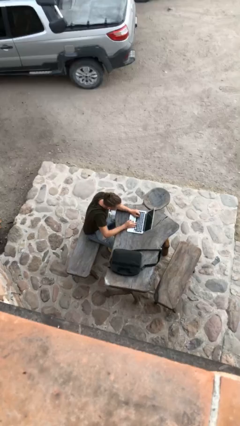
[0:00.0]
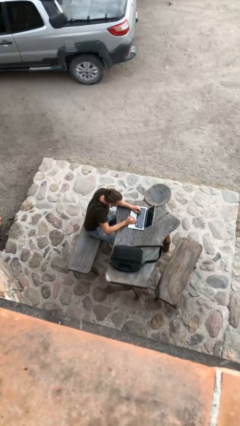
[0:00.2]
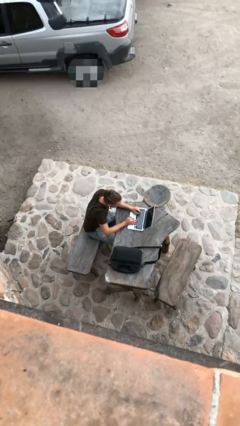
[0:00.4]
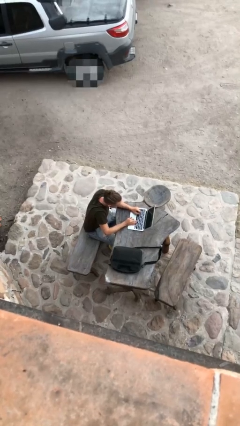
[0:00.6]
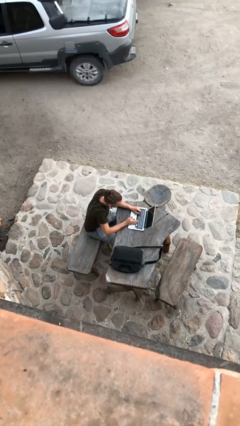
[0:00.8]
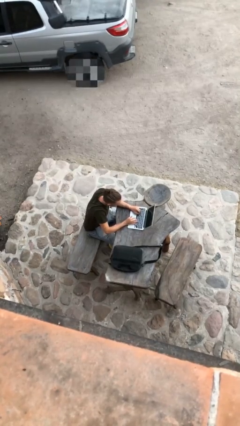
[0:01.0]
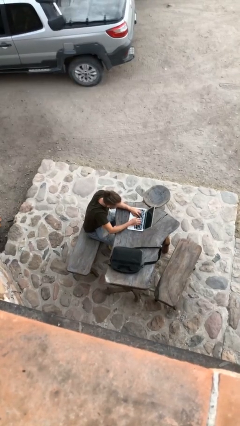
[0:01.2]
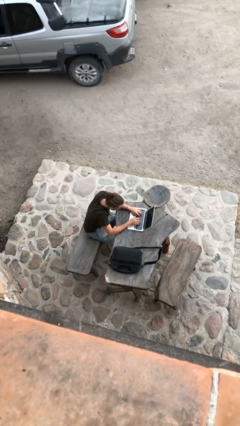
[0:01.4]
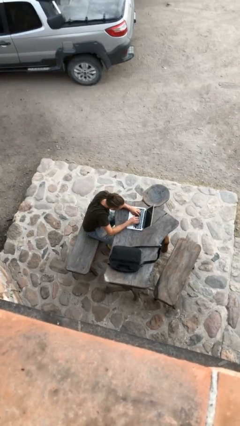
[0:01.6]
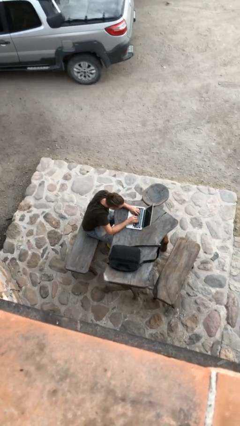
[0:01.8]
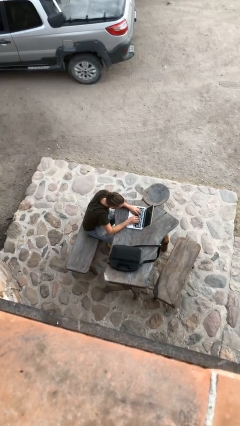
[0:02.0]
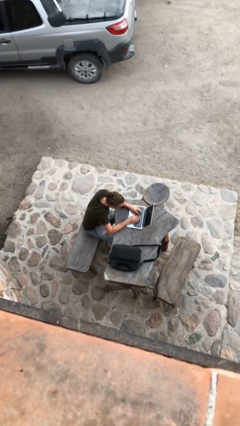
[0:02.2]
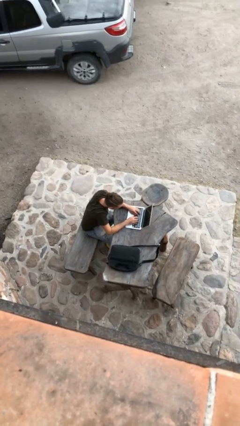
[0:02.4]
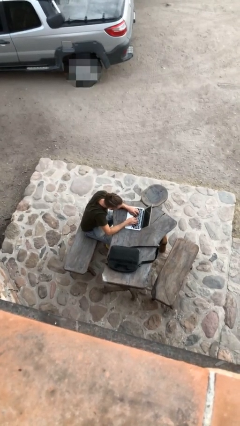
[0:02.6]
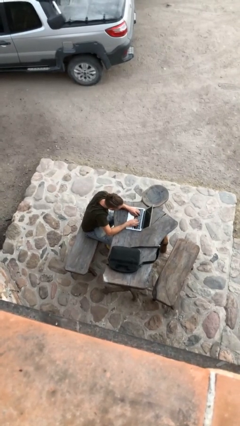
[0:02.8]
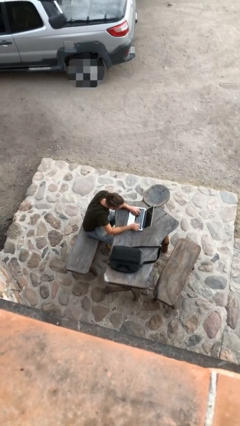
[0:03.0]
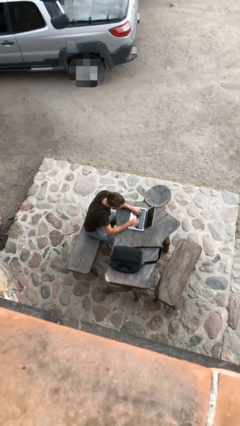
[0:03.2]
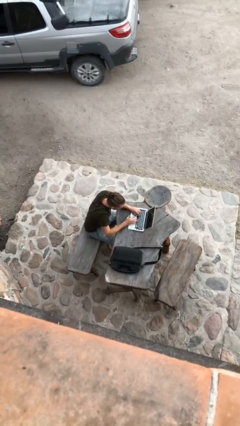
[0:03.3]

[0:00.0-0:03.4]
person interacts with laptop

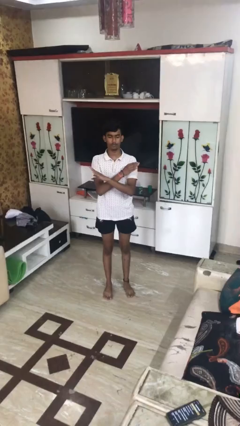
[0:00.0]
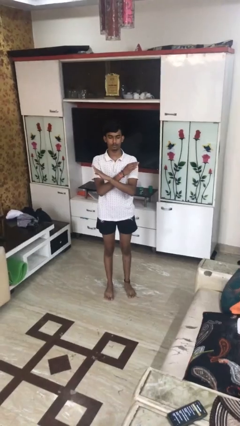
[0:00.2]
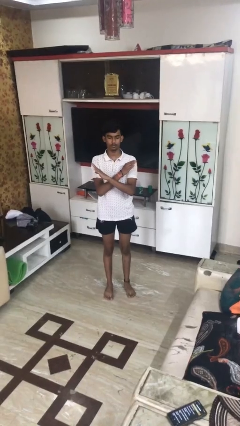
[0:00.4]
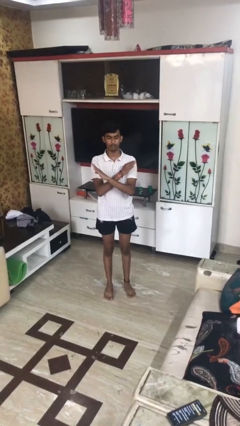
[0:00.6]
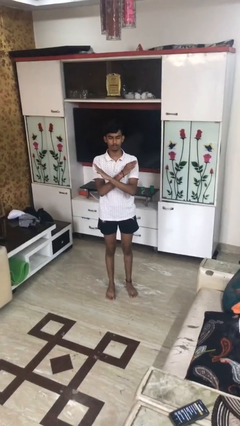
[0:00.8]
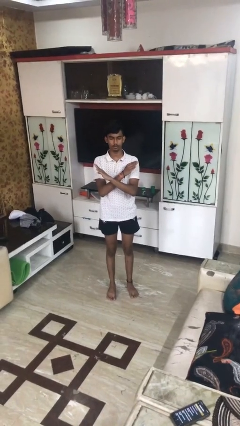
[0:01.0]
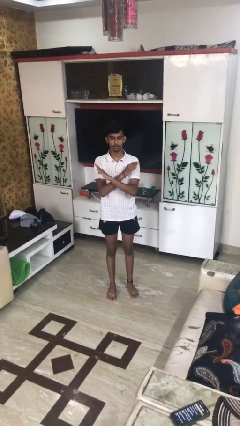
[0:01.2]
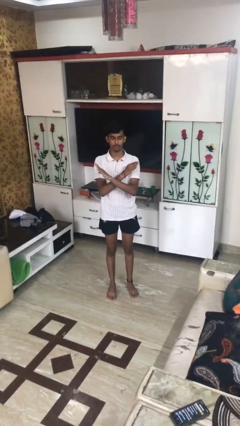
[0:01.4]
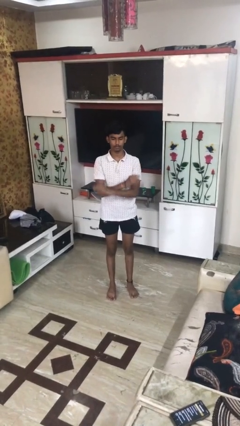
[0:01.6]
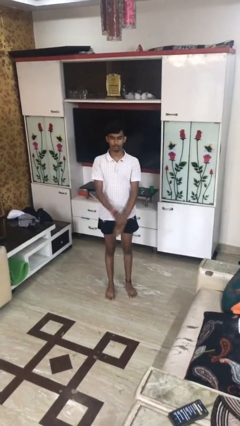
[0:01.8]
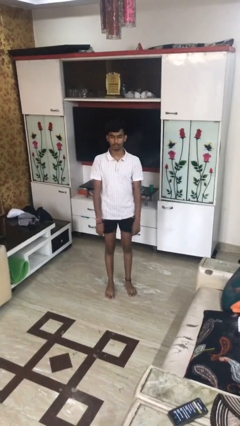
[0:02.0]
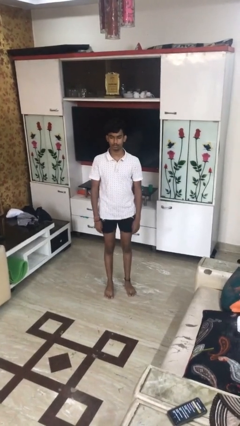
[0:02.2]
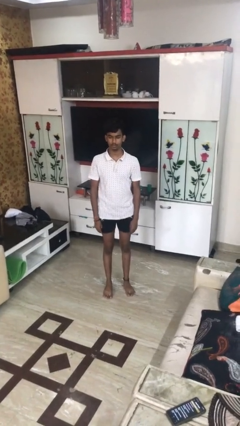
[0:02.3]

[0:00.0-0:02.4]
person gestures arms x

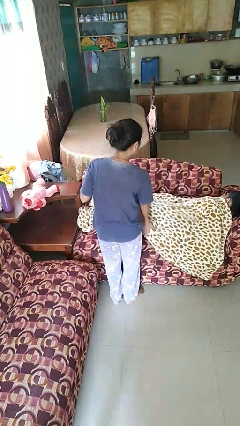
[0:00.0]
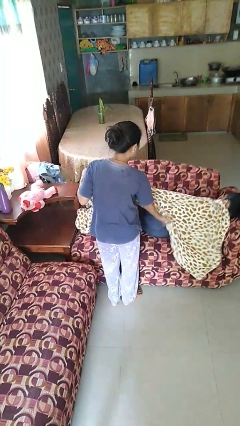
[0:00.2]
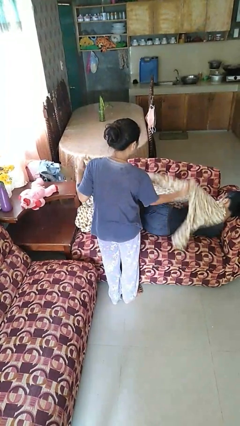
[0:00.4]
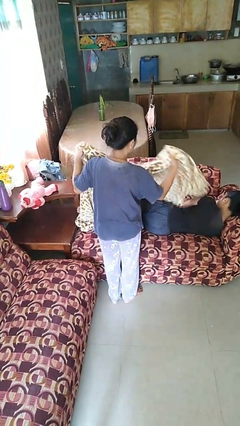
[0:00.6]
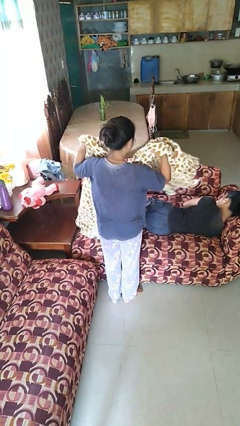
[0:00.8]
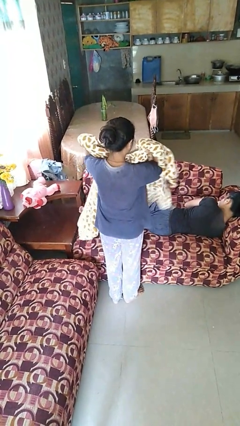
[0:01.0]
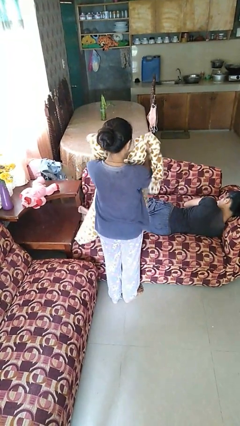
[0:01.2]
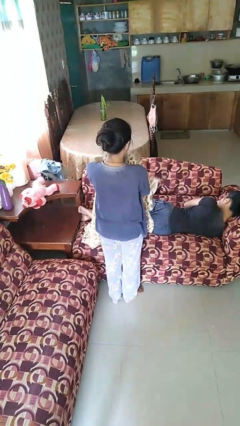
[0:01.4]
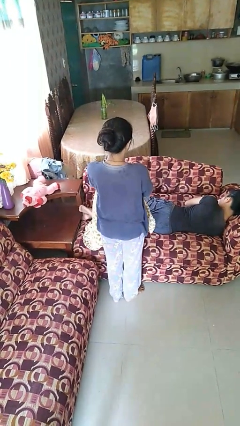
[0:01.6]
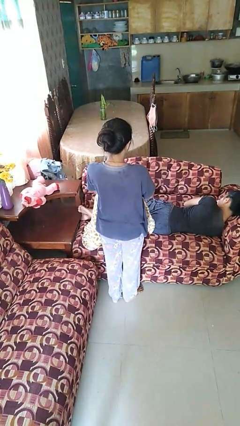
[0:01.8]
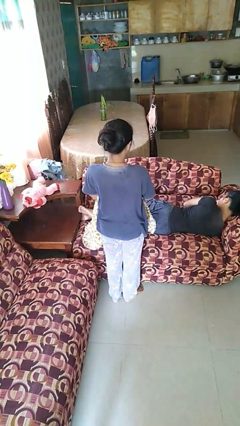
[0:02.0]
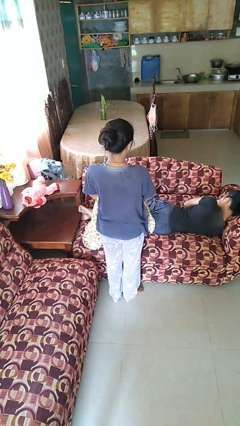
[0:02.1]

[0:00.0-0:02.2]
person uncovers friend with blanket

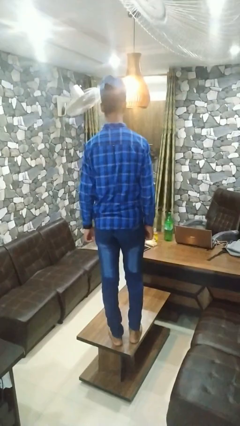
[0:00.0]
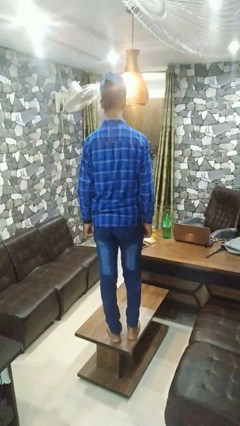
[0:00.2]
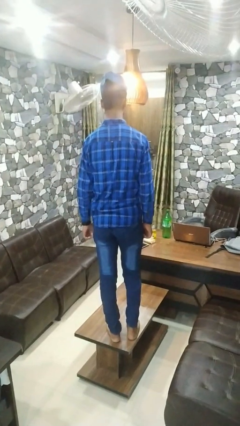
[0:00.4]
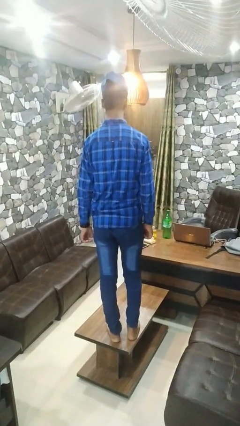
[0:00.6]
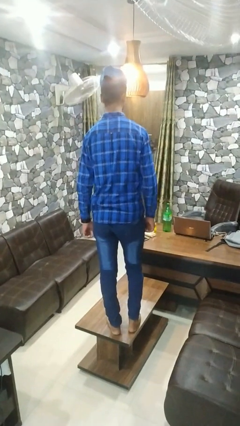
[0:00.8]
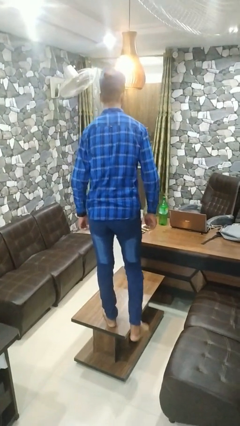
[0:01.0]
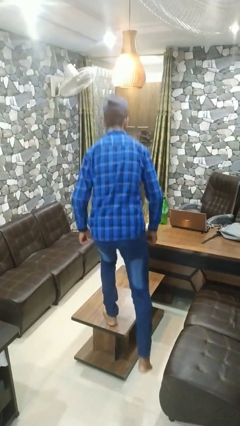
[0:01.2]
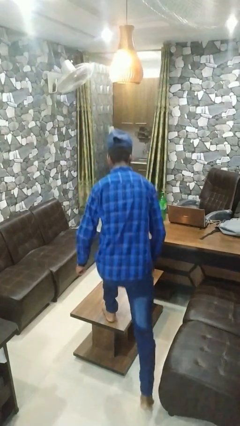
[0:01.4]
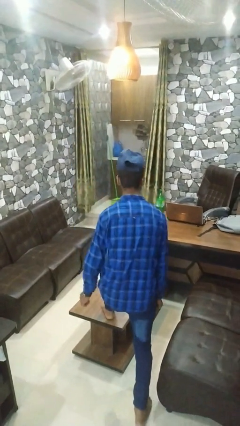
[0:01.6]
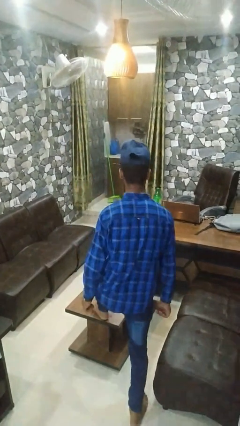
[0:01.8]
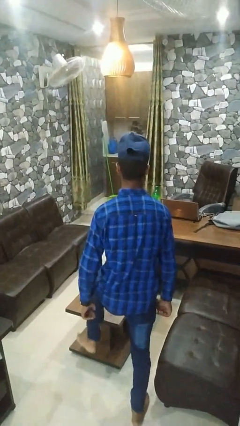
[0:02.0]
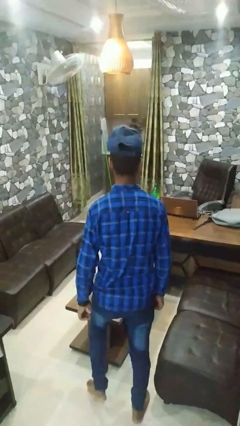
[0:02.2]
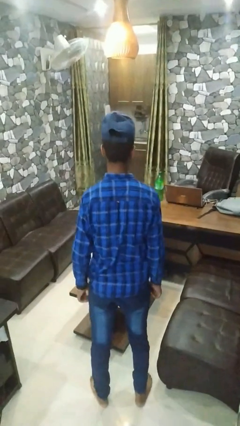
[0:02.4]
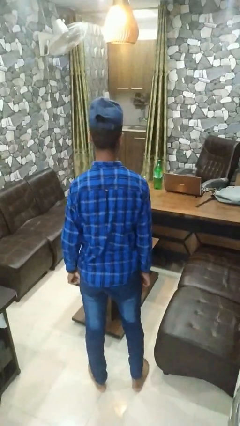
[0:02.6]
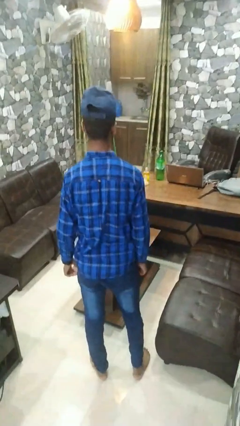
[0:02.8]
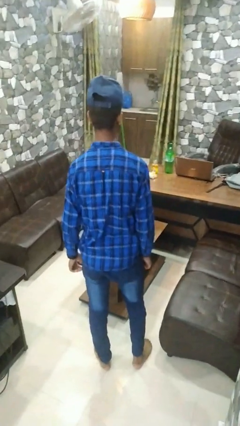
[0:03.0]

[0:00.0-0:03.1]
person climbs off table

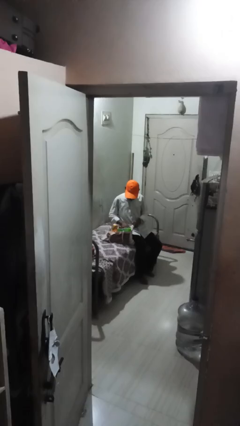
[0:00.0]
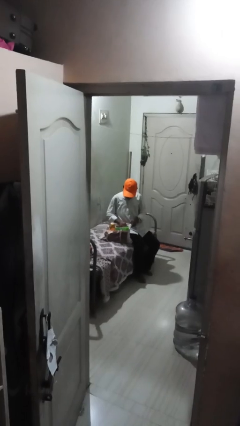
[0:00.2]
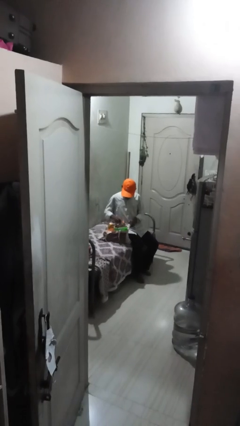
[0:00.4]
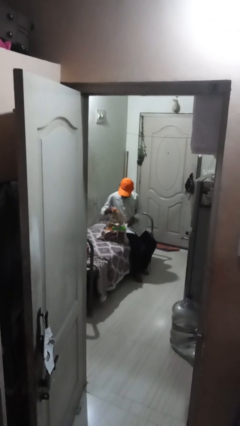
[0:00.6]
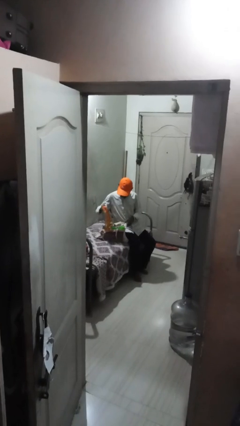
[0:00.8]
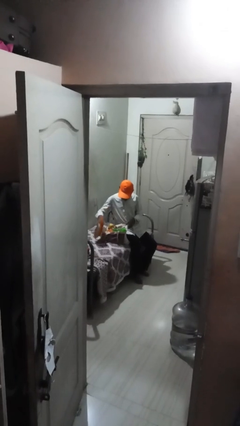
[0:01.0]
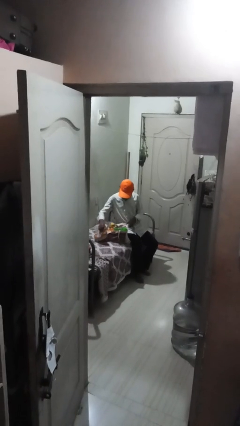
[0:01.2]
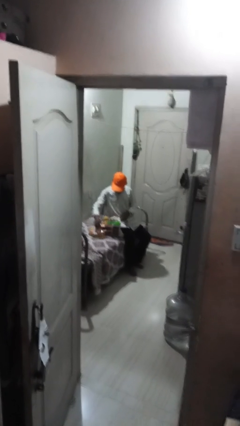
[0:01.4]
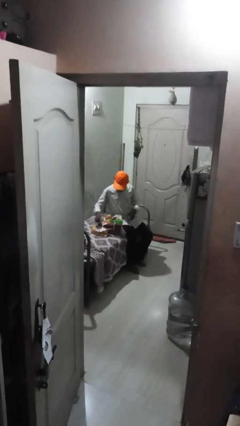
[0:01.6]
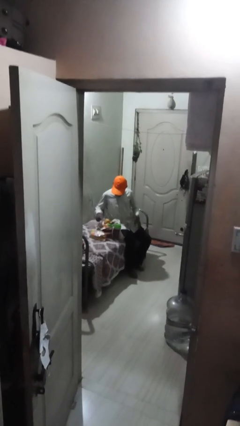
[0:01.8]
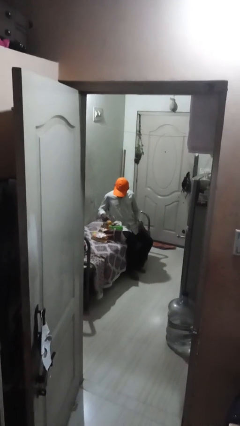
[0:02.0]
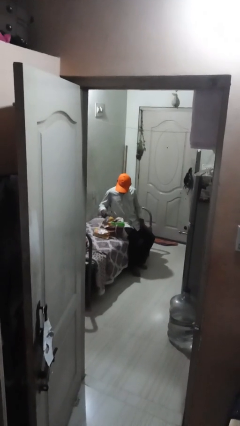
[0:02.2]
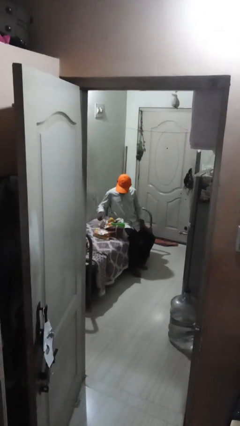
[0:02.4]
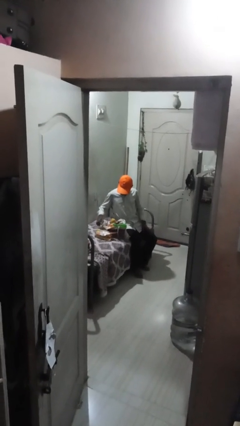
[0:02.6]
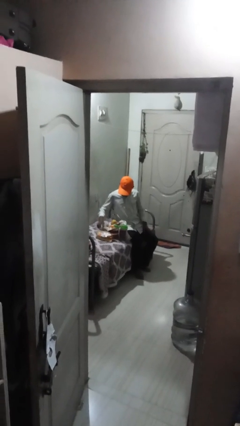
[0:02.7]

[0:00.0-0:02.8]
person takes object from bag

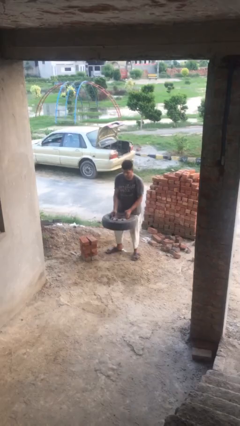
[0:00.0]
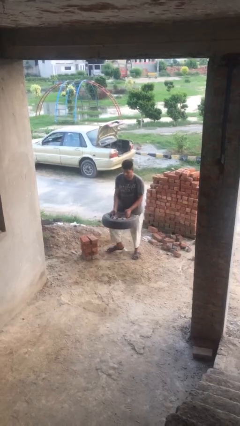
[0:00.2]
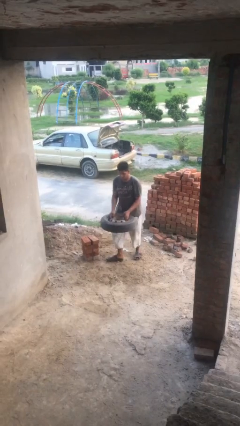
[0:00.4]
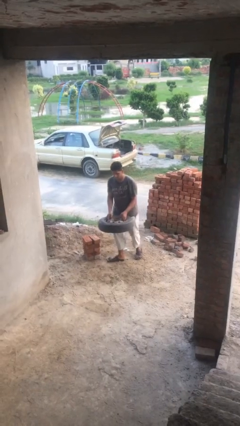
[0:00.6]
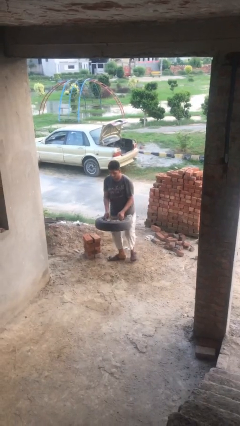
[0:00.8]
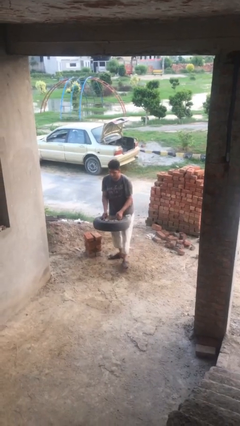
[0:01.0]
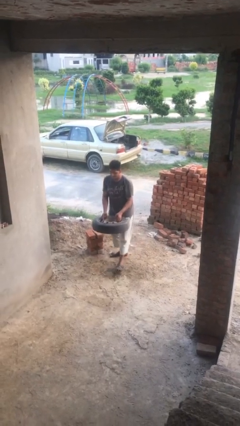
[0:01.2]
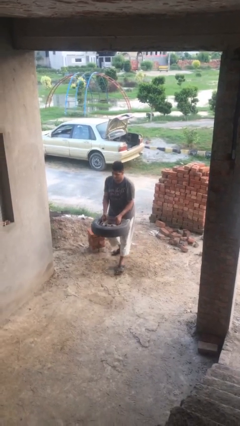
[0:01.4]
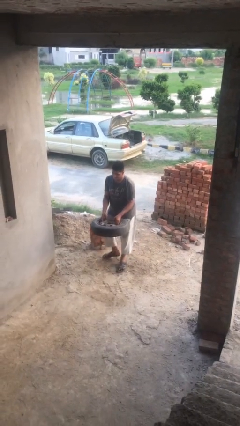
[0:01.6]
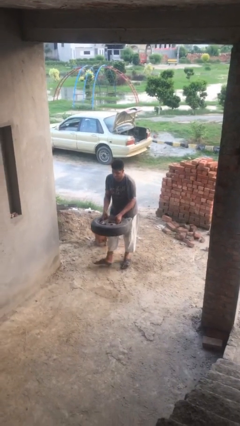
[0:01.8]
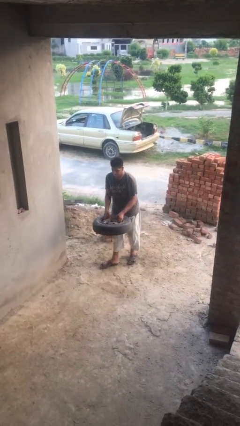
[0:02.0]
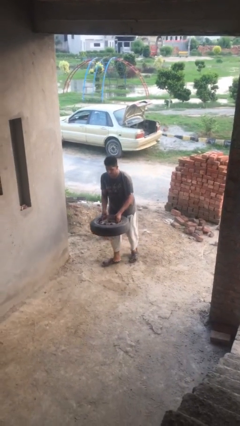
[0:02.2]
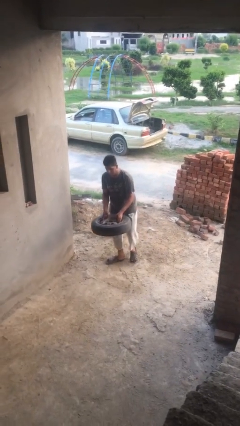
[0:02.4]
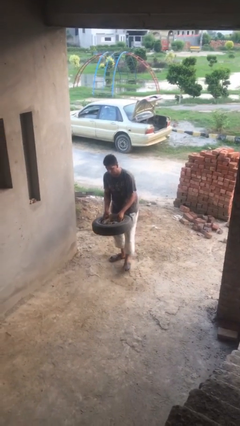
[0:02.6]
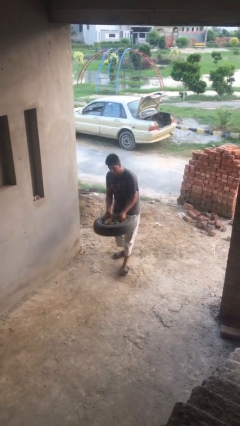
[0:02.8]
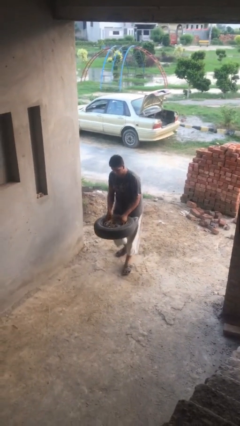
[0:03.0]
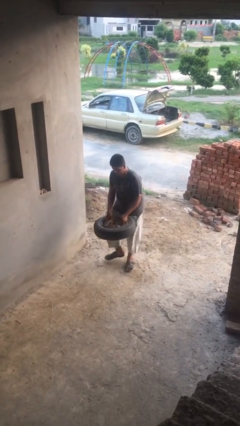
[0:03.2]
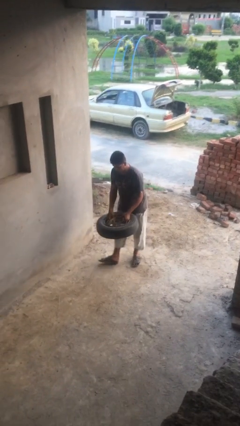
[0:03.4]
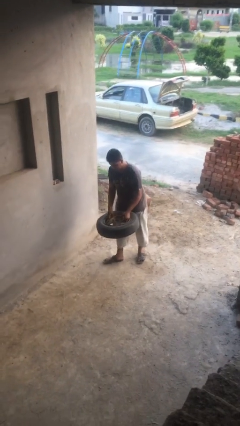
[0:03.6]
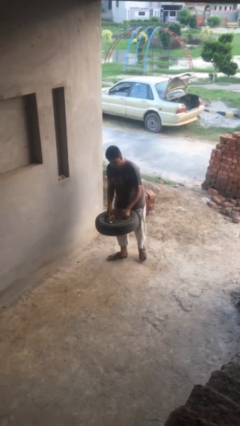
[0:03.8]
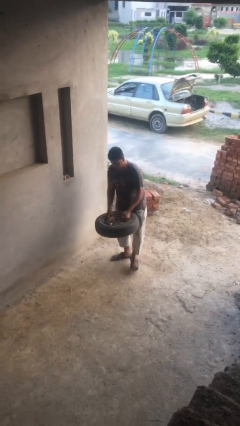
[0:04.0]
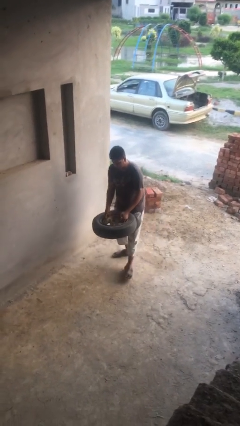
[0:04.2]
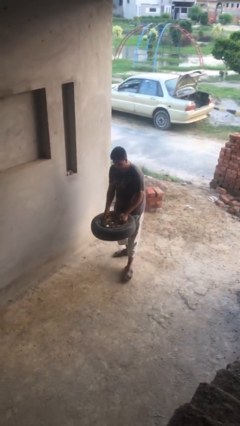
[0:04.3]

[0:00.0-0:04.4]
person carries heavy object
